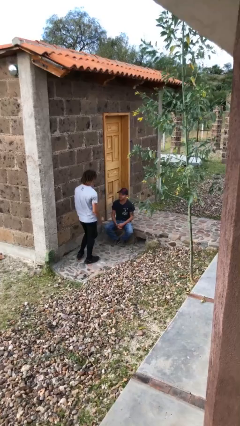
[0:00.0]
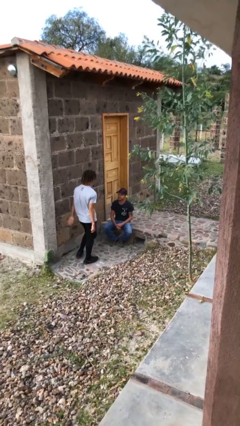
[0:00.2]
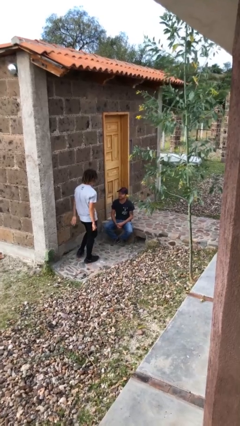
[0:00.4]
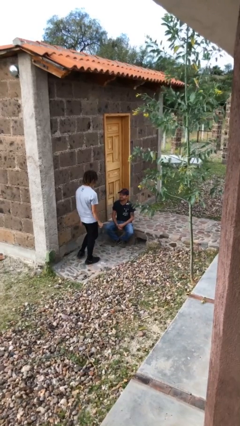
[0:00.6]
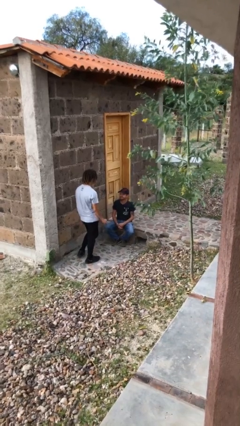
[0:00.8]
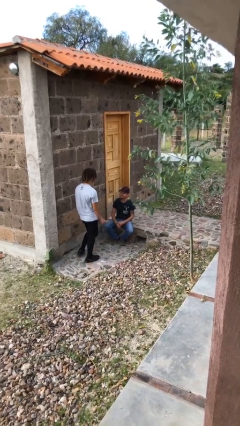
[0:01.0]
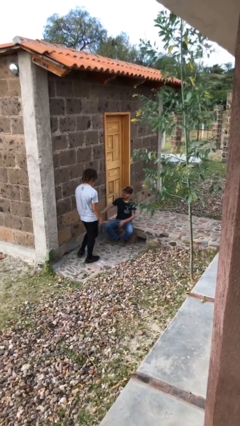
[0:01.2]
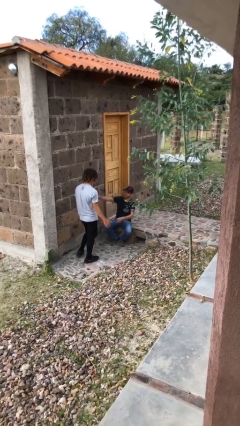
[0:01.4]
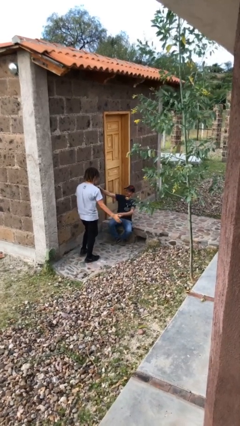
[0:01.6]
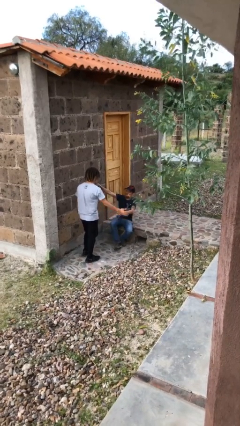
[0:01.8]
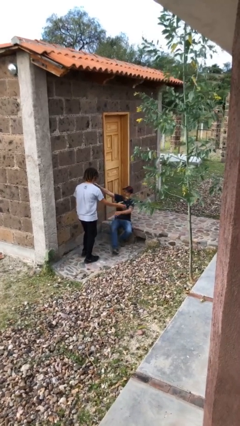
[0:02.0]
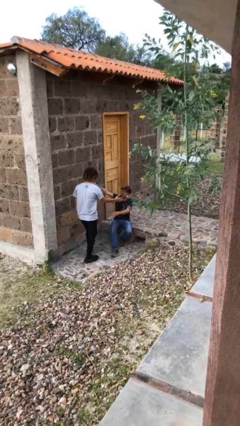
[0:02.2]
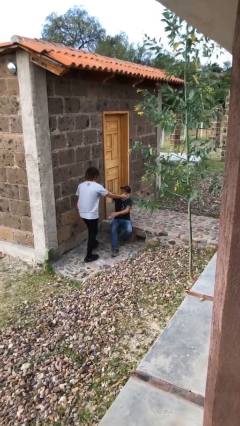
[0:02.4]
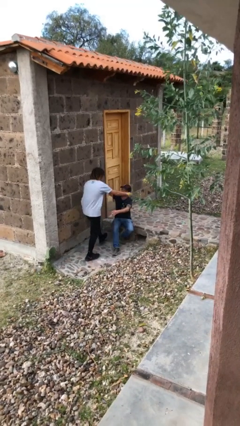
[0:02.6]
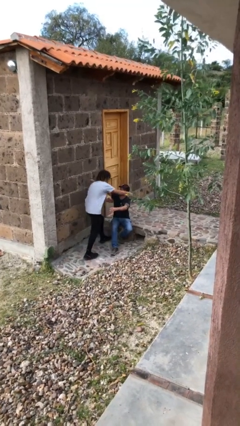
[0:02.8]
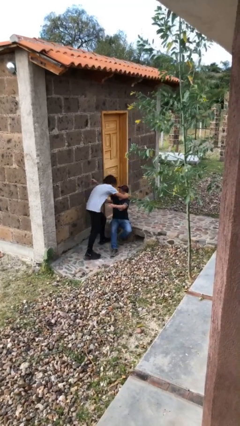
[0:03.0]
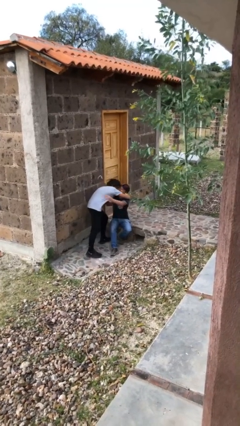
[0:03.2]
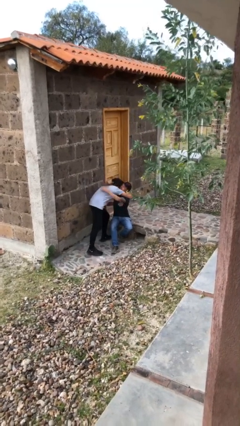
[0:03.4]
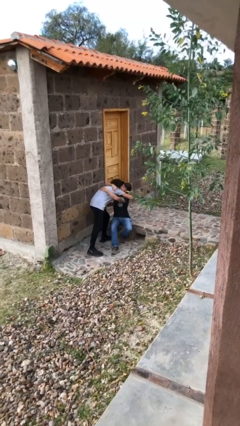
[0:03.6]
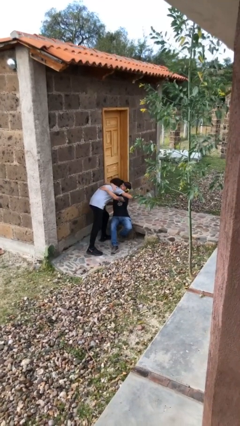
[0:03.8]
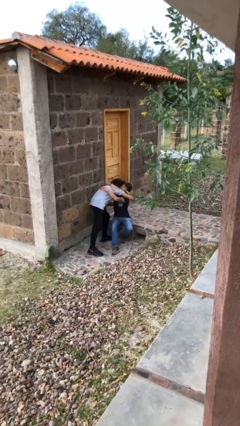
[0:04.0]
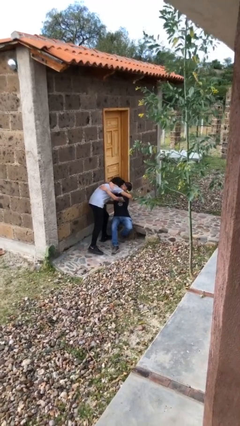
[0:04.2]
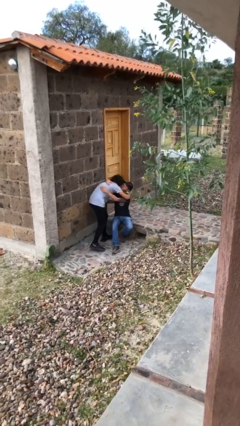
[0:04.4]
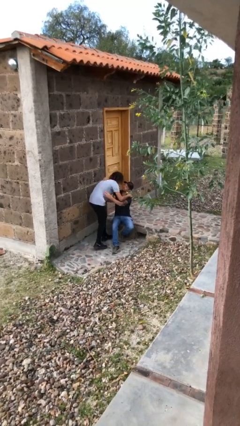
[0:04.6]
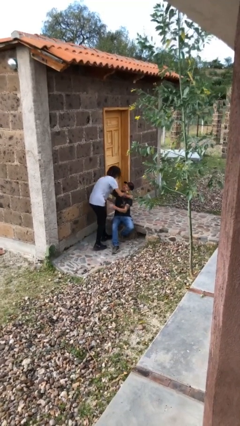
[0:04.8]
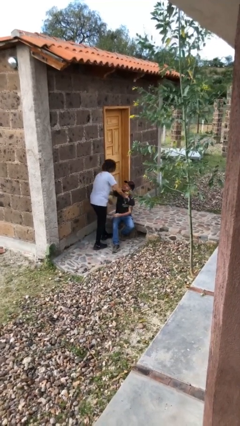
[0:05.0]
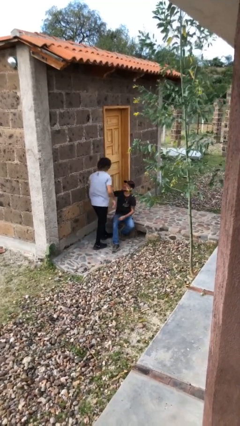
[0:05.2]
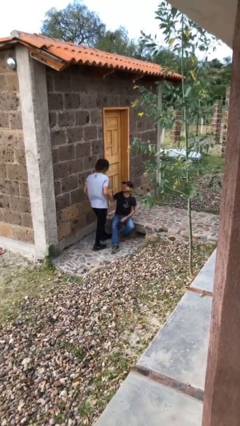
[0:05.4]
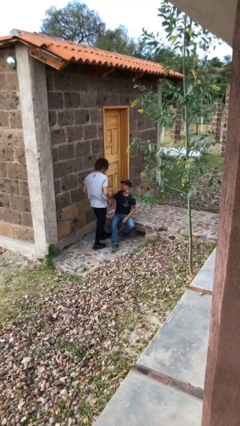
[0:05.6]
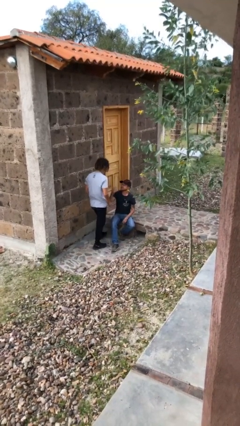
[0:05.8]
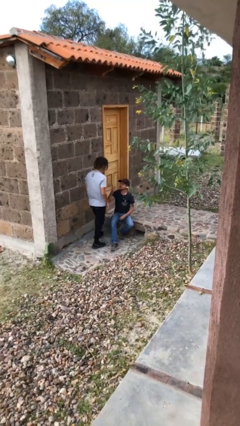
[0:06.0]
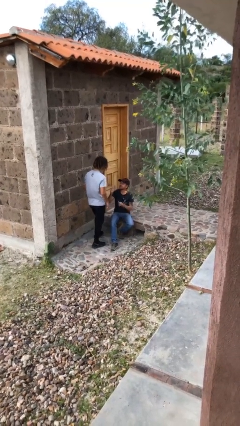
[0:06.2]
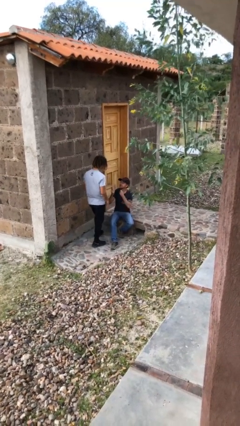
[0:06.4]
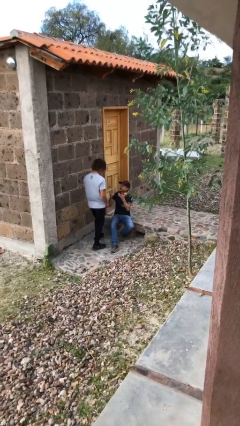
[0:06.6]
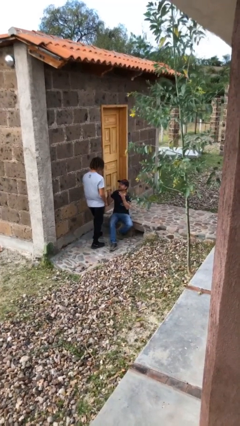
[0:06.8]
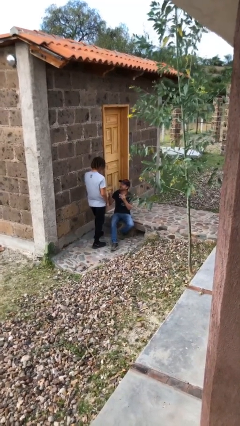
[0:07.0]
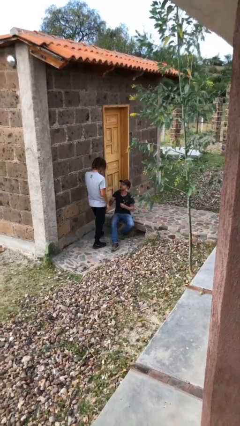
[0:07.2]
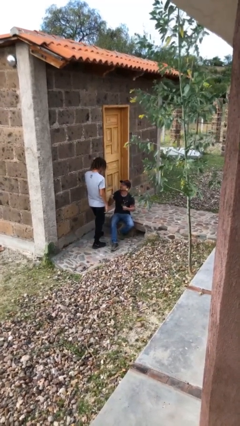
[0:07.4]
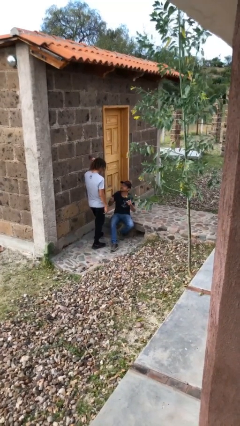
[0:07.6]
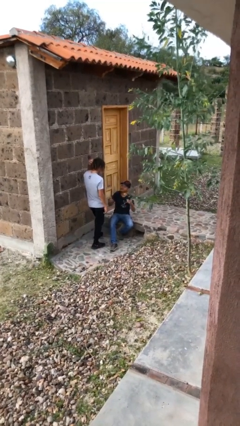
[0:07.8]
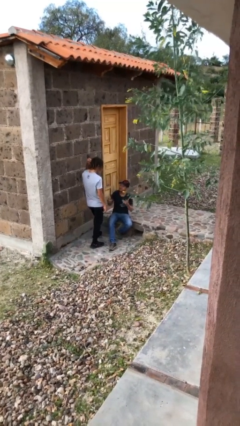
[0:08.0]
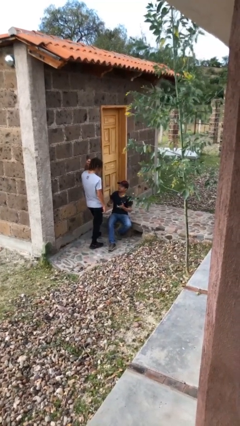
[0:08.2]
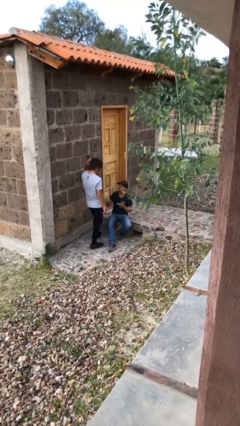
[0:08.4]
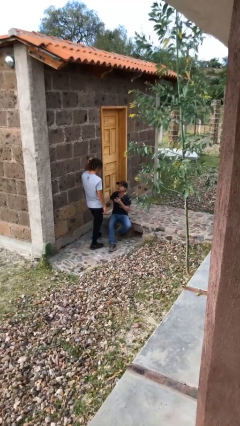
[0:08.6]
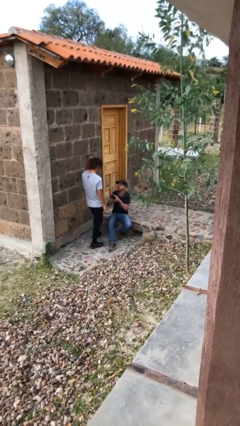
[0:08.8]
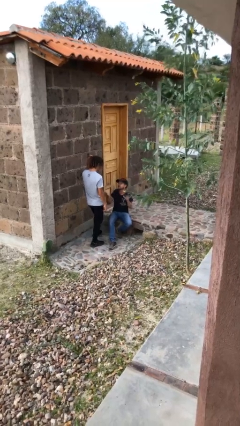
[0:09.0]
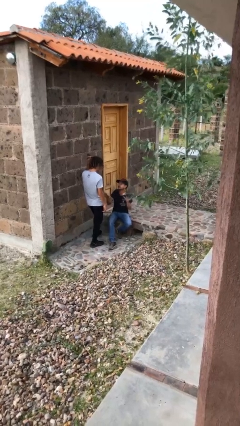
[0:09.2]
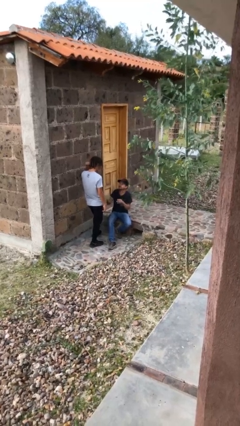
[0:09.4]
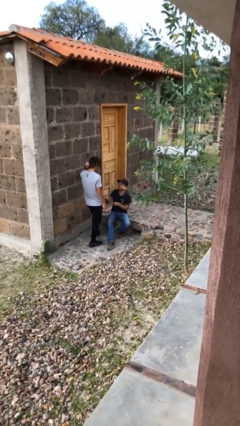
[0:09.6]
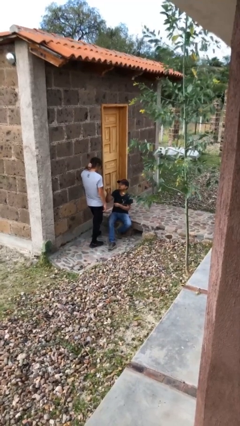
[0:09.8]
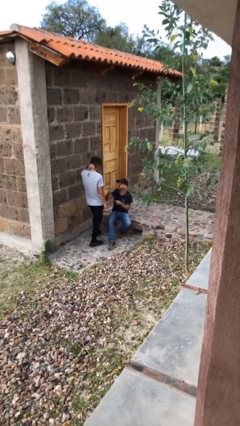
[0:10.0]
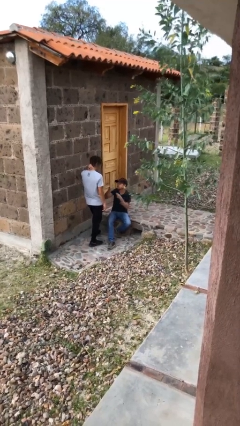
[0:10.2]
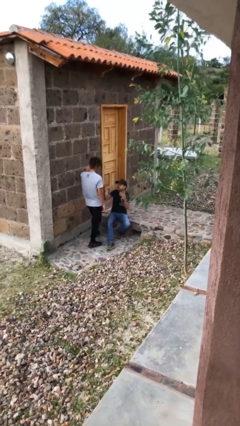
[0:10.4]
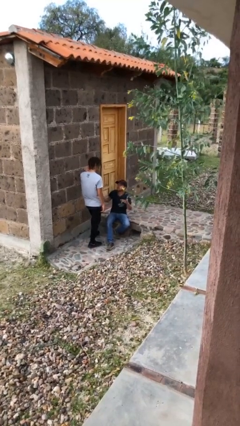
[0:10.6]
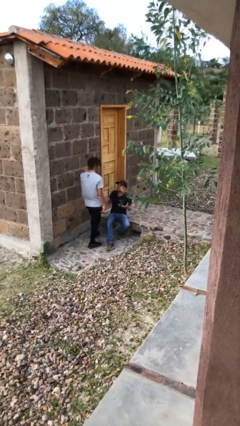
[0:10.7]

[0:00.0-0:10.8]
person embraces person

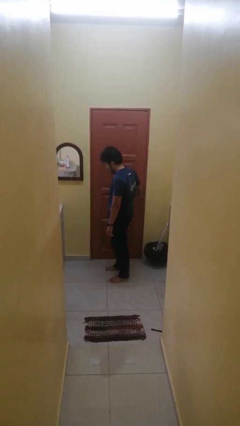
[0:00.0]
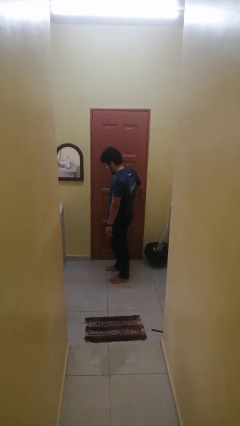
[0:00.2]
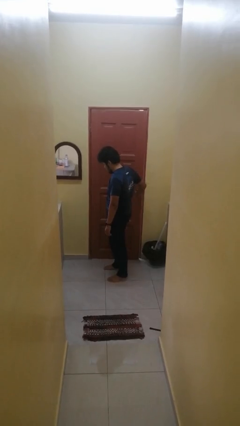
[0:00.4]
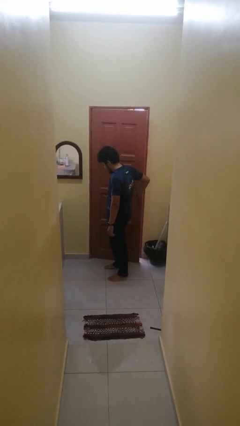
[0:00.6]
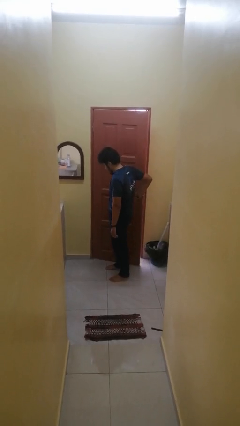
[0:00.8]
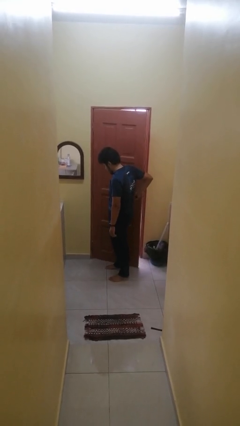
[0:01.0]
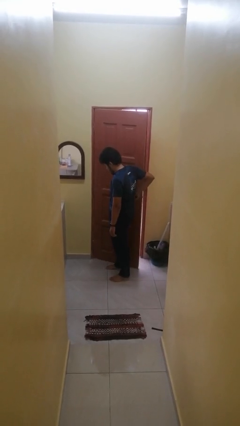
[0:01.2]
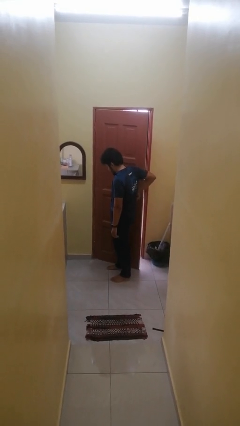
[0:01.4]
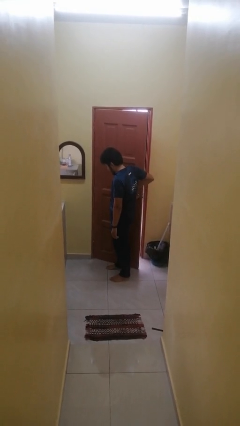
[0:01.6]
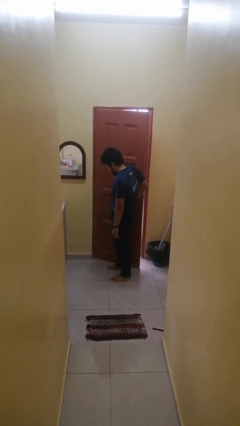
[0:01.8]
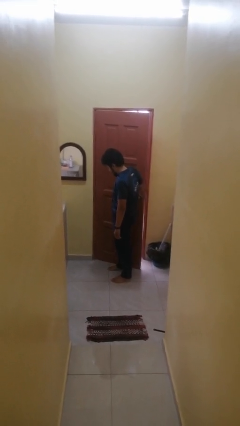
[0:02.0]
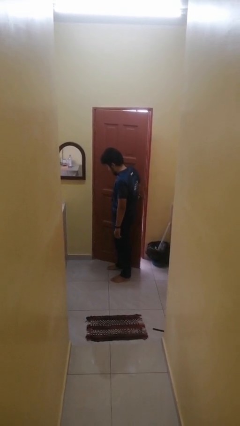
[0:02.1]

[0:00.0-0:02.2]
person opens facility door

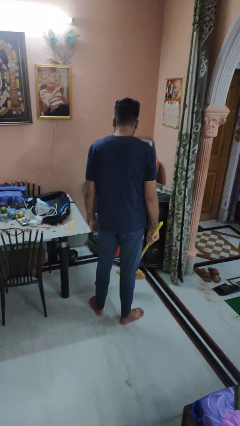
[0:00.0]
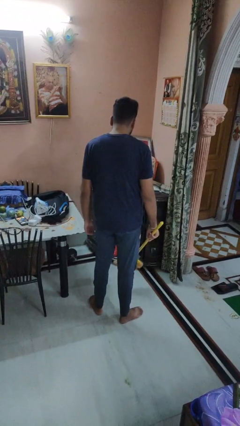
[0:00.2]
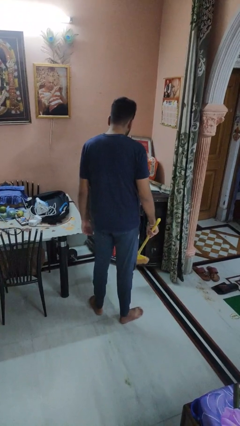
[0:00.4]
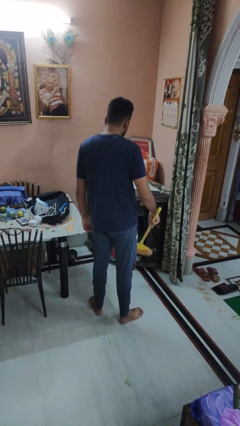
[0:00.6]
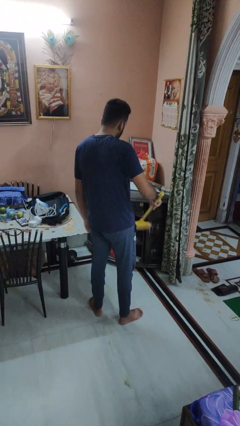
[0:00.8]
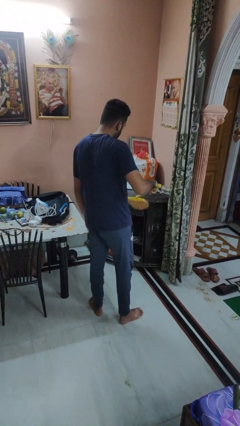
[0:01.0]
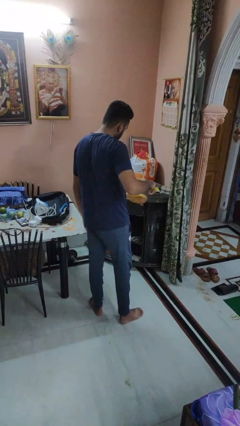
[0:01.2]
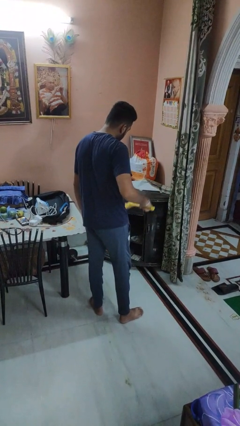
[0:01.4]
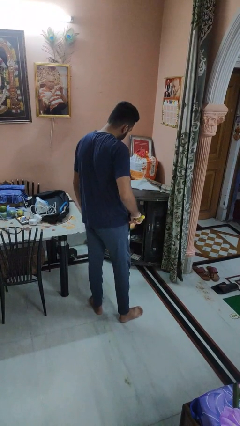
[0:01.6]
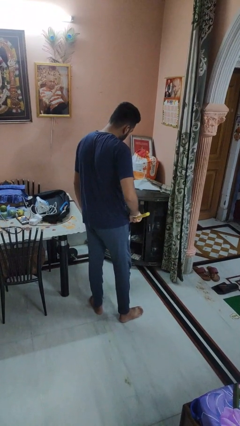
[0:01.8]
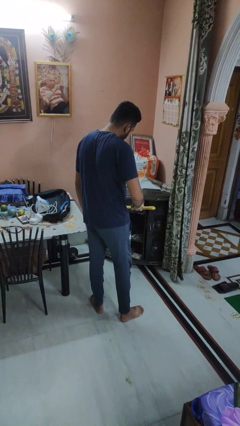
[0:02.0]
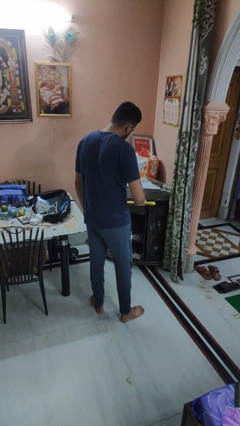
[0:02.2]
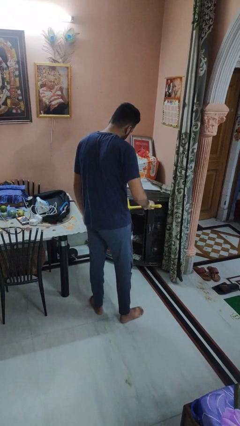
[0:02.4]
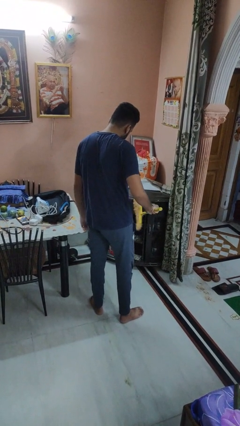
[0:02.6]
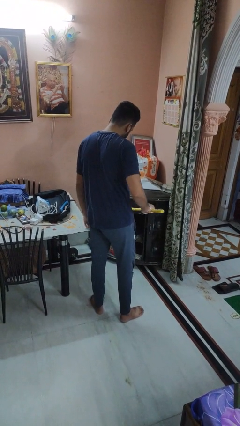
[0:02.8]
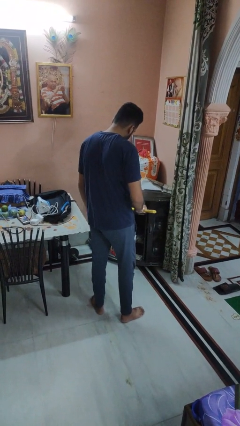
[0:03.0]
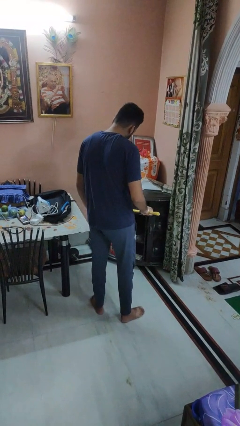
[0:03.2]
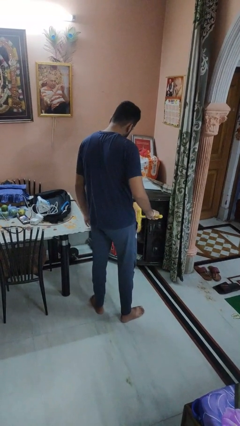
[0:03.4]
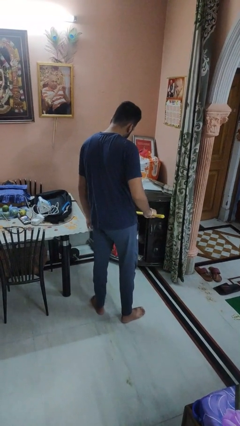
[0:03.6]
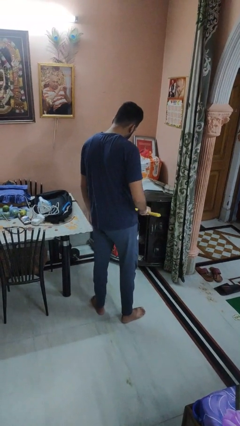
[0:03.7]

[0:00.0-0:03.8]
person dusts furniture

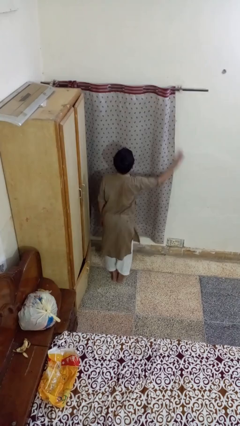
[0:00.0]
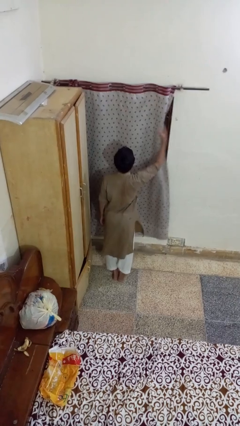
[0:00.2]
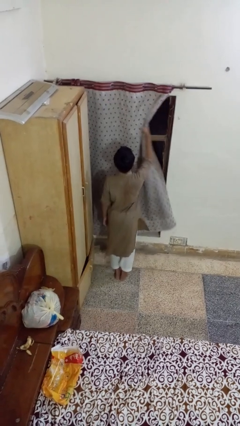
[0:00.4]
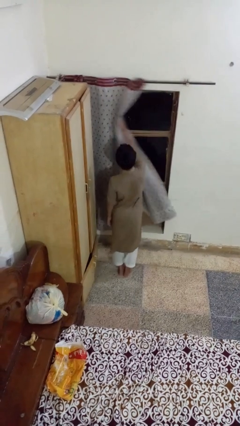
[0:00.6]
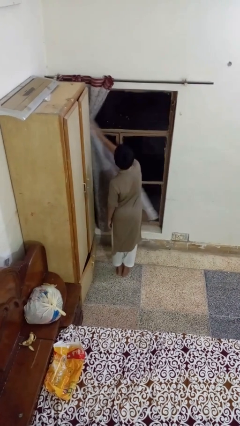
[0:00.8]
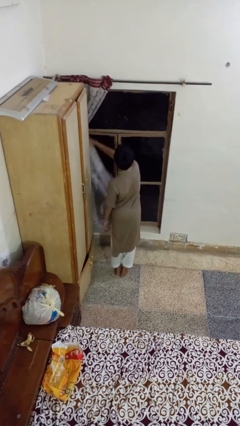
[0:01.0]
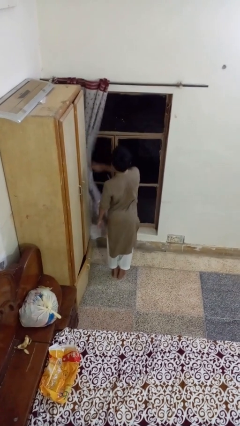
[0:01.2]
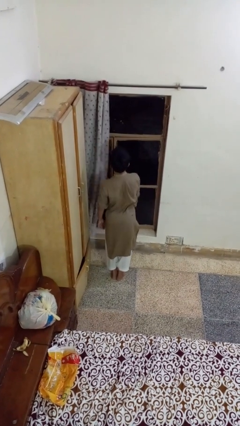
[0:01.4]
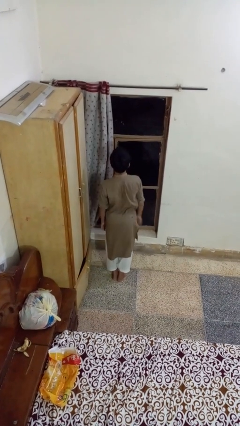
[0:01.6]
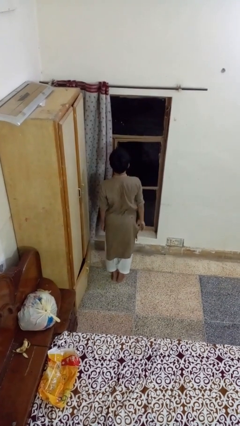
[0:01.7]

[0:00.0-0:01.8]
person opens curtains
